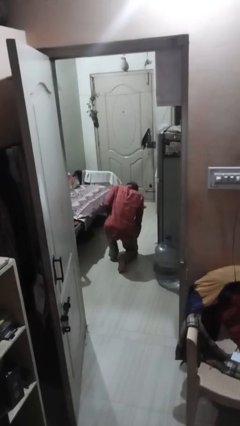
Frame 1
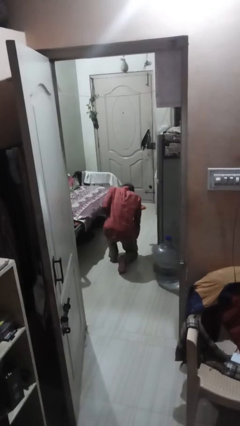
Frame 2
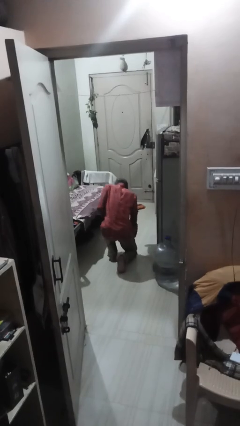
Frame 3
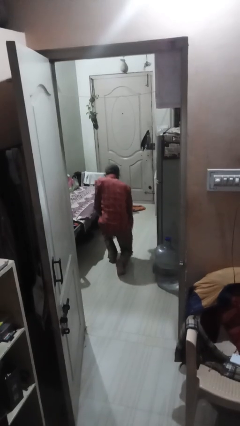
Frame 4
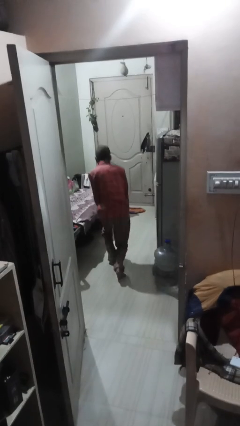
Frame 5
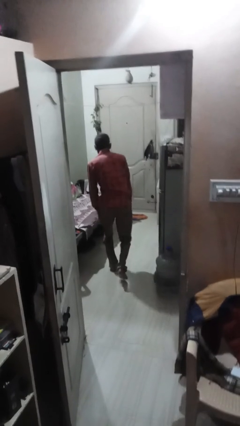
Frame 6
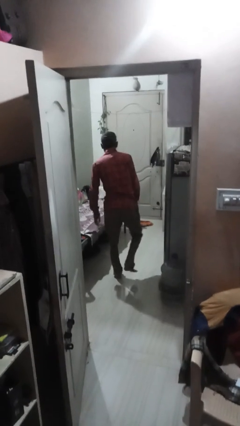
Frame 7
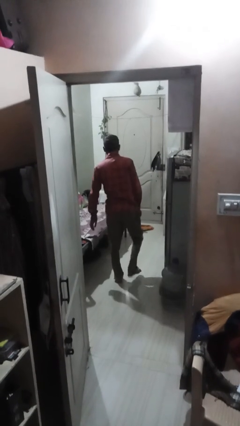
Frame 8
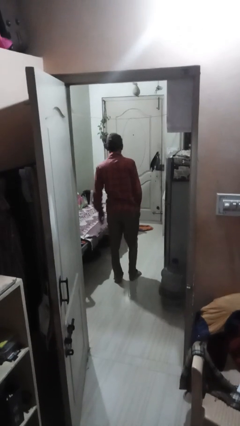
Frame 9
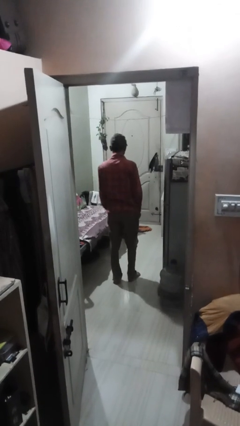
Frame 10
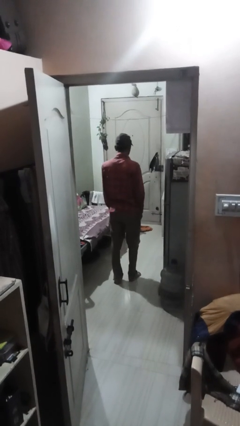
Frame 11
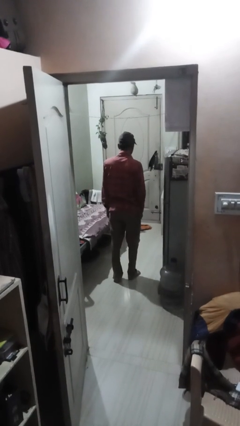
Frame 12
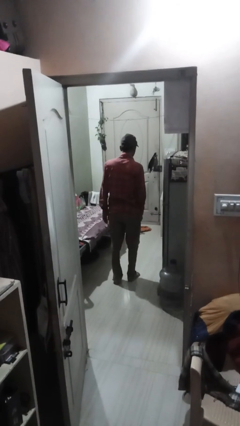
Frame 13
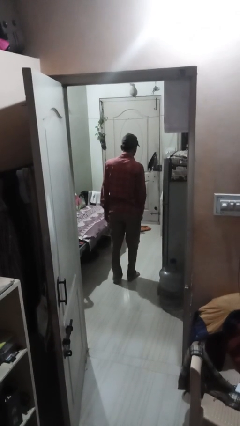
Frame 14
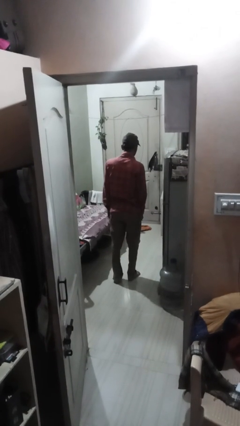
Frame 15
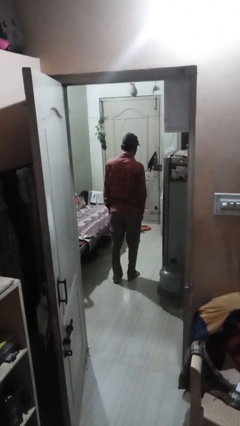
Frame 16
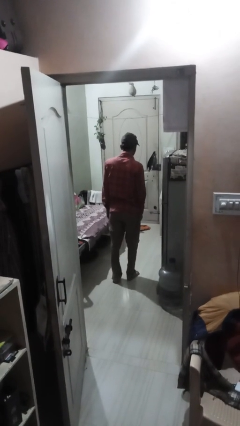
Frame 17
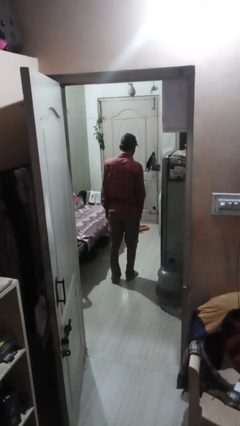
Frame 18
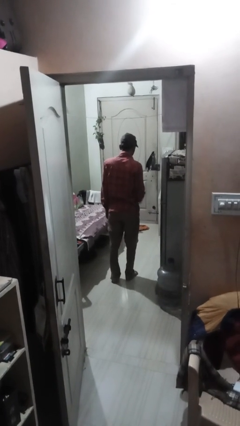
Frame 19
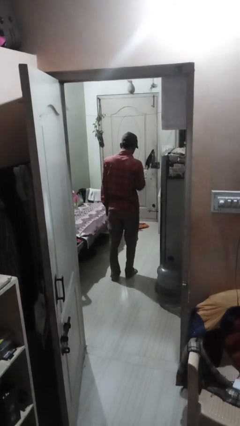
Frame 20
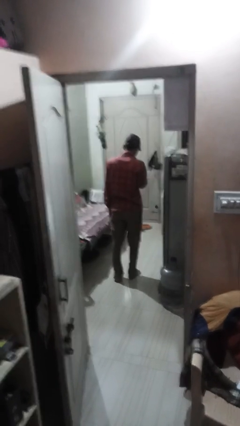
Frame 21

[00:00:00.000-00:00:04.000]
person stands up from floor

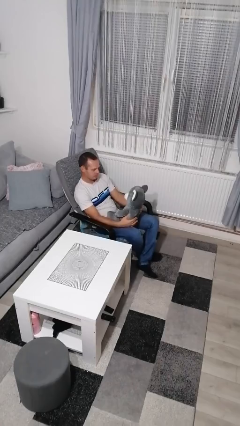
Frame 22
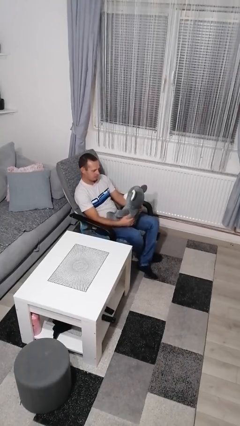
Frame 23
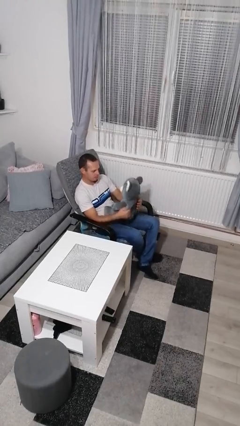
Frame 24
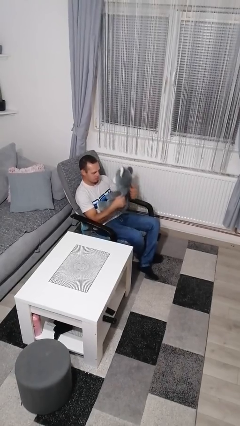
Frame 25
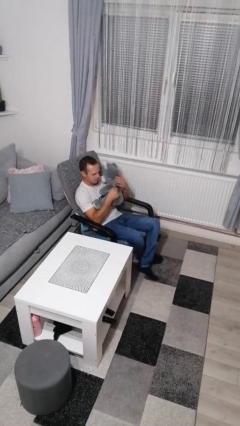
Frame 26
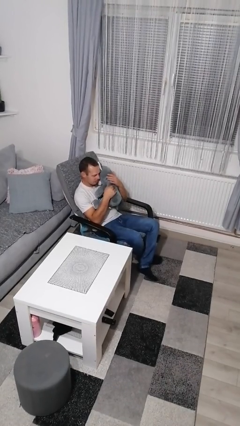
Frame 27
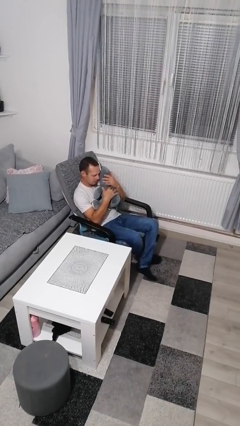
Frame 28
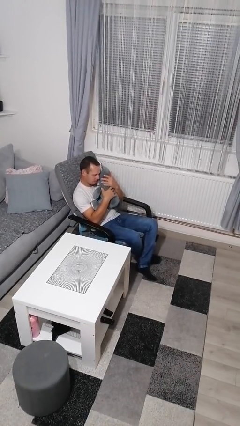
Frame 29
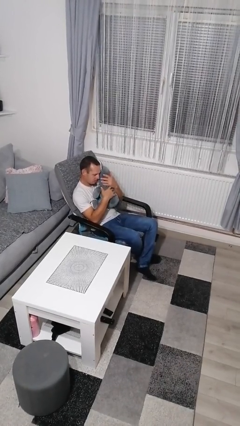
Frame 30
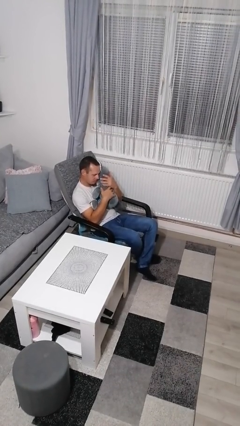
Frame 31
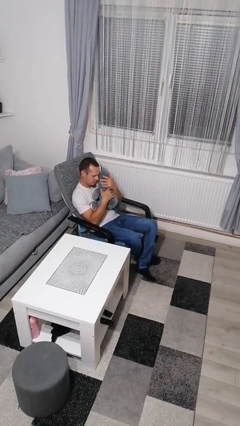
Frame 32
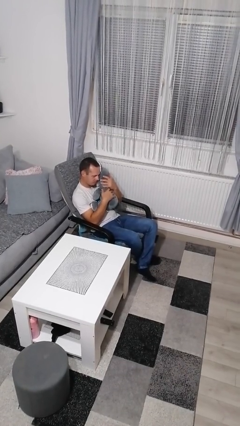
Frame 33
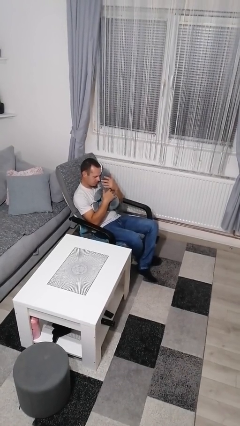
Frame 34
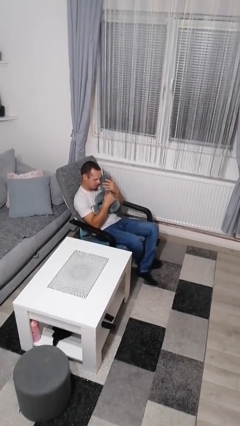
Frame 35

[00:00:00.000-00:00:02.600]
person hugs stuffed animal

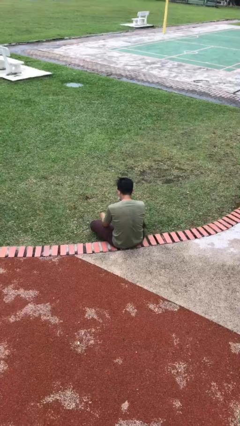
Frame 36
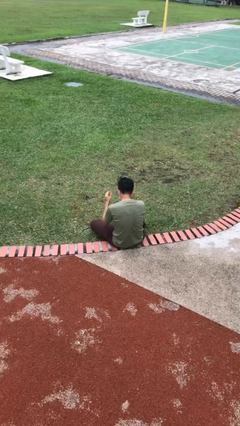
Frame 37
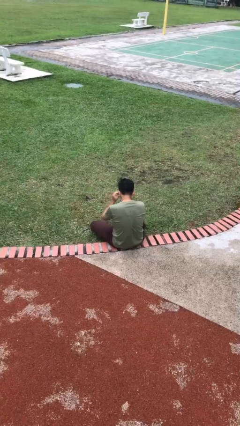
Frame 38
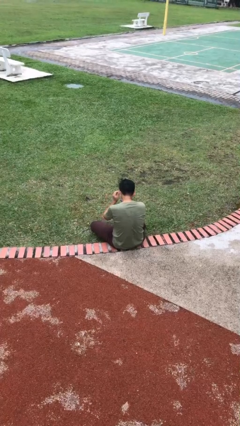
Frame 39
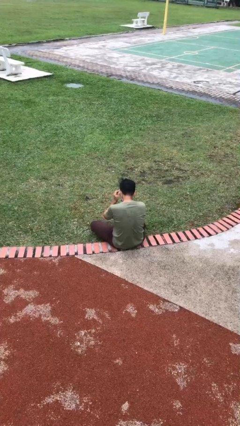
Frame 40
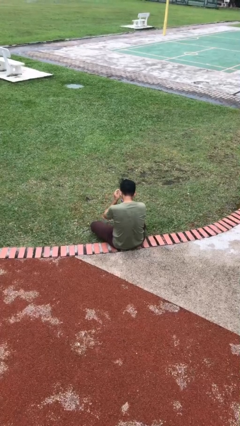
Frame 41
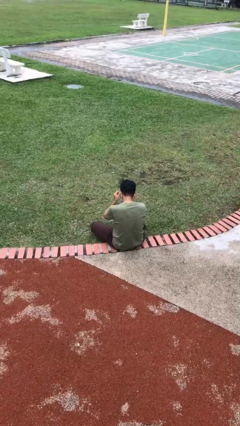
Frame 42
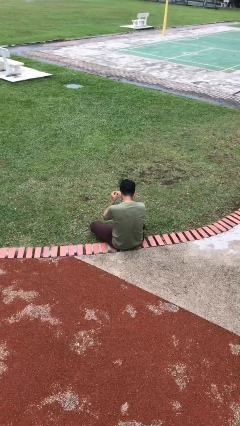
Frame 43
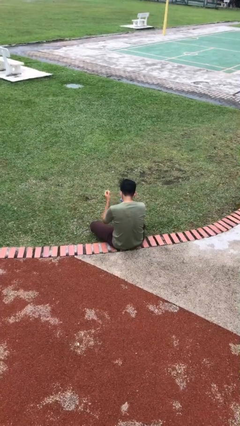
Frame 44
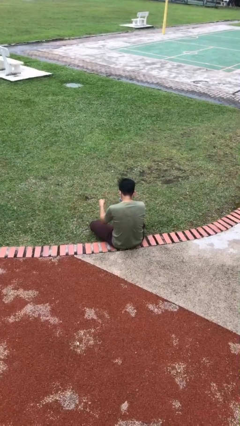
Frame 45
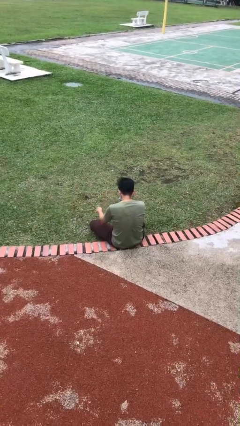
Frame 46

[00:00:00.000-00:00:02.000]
person touches earlobe

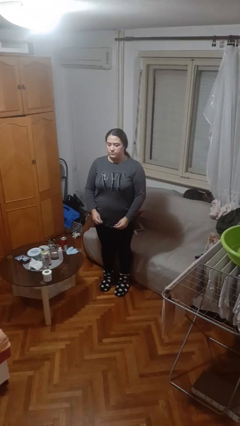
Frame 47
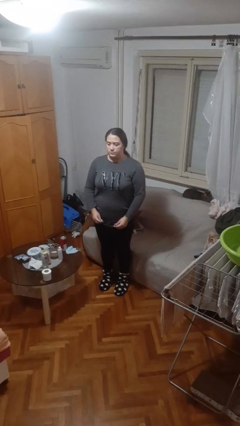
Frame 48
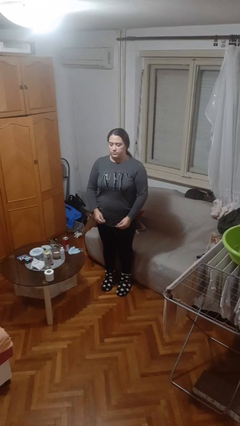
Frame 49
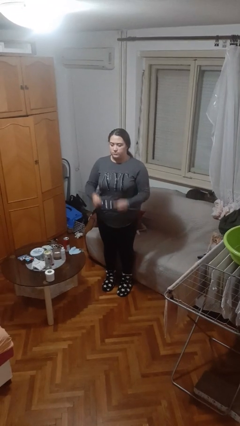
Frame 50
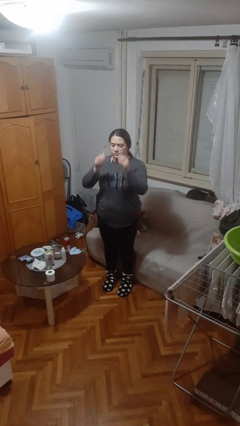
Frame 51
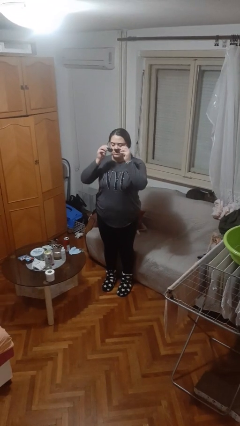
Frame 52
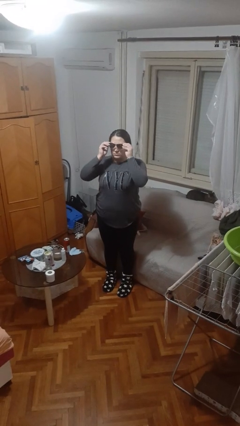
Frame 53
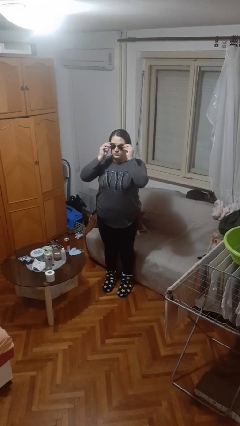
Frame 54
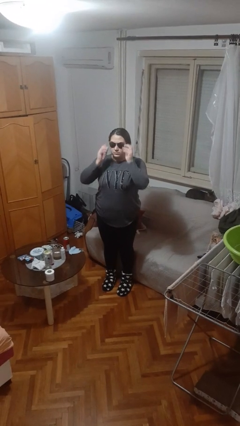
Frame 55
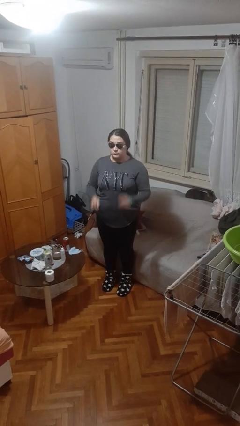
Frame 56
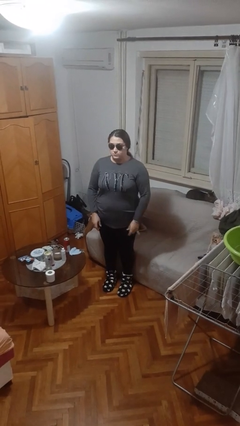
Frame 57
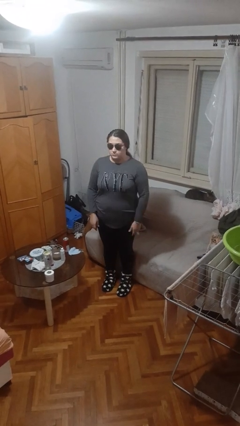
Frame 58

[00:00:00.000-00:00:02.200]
person puts on sunglasses

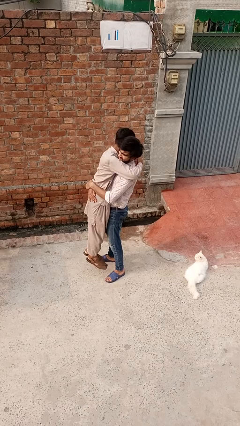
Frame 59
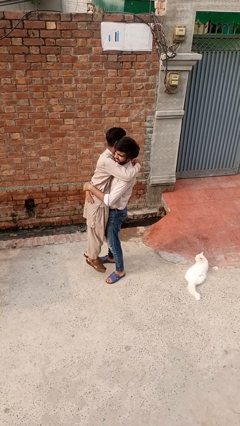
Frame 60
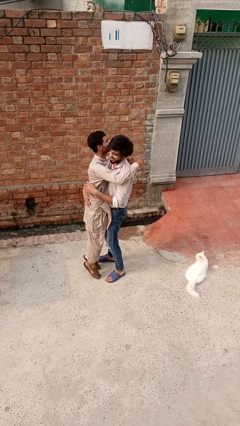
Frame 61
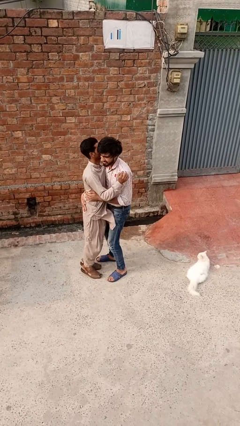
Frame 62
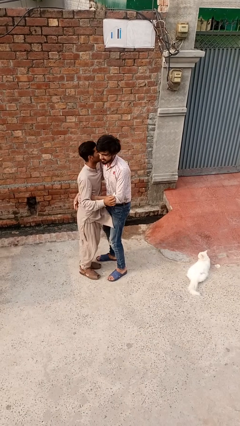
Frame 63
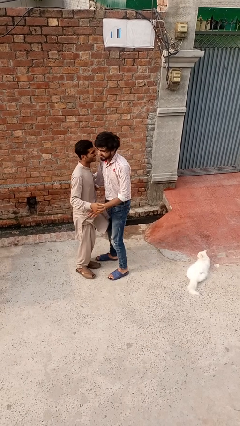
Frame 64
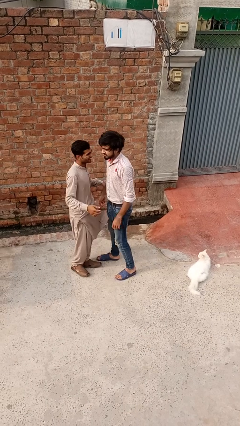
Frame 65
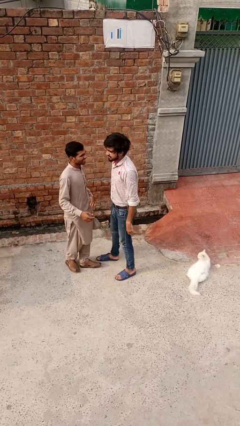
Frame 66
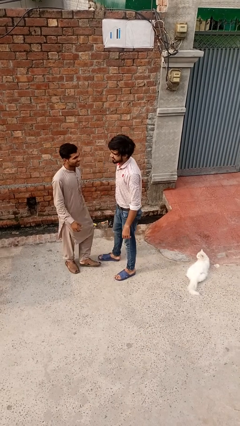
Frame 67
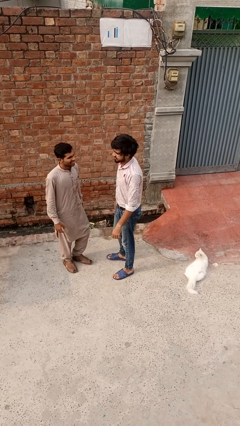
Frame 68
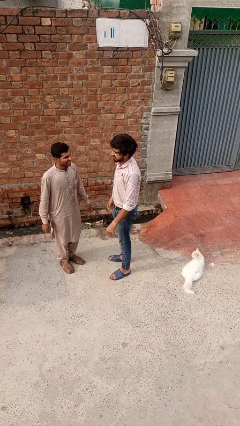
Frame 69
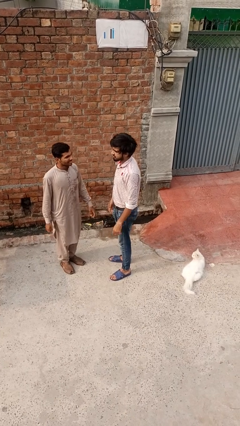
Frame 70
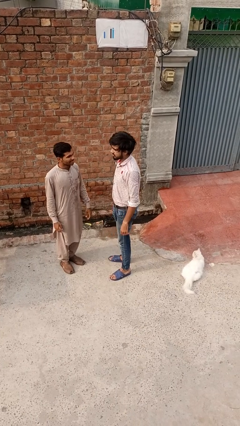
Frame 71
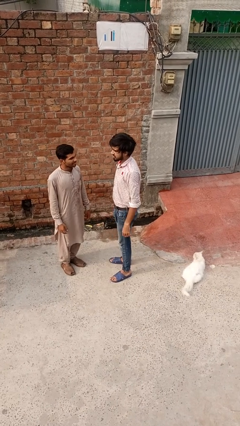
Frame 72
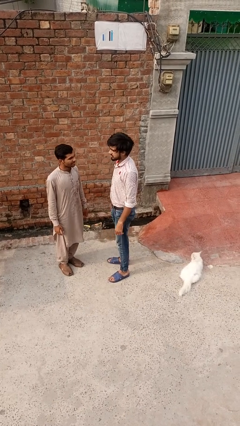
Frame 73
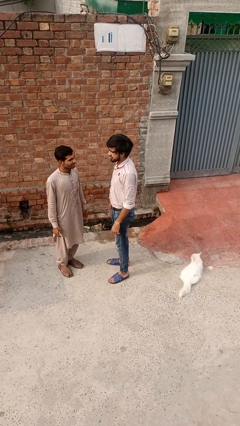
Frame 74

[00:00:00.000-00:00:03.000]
person puts down person

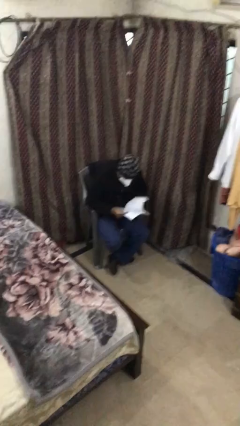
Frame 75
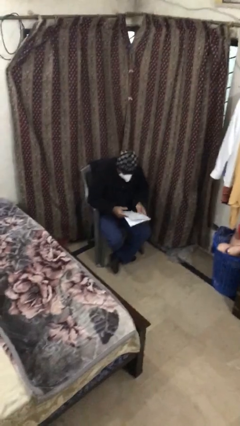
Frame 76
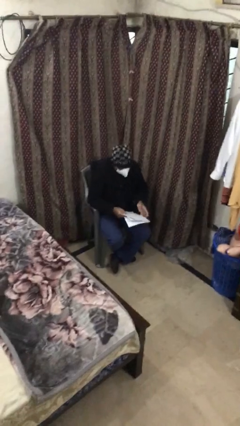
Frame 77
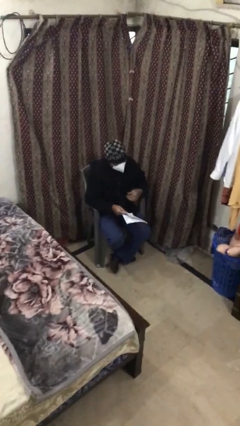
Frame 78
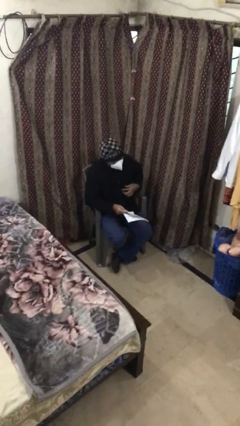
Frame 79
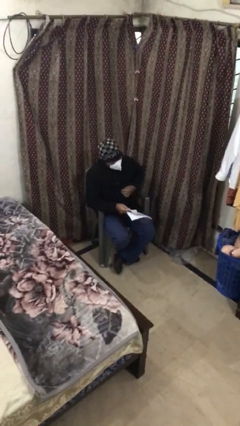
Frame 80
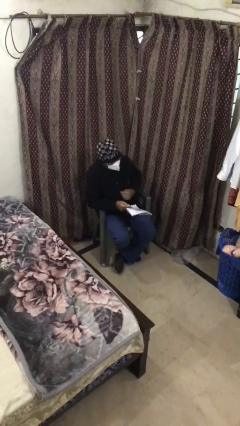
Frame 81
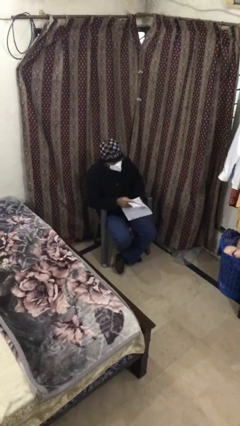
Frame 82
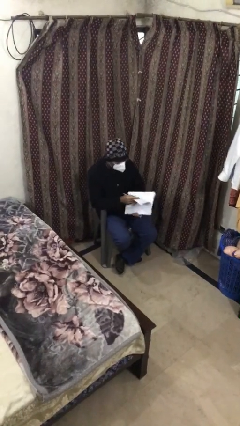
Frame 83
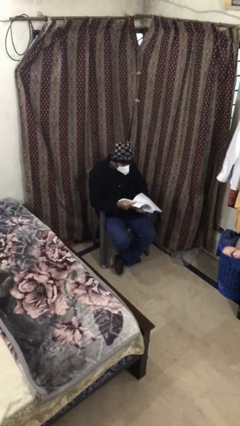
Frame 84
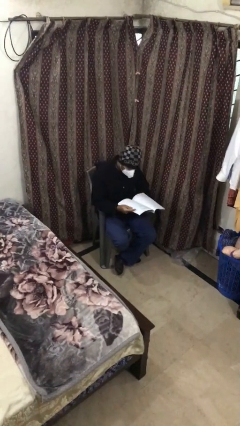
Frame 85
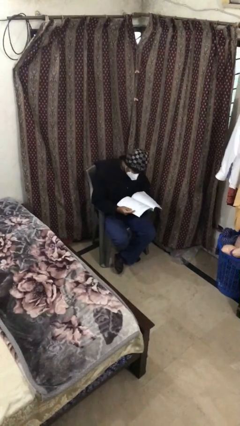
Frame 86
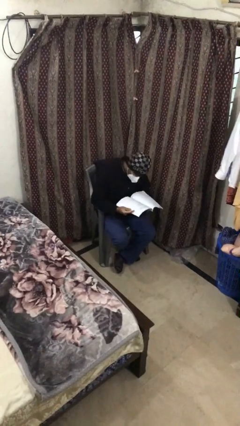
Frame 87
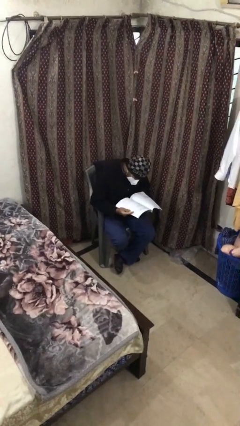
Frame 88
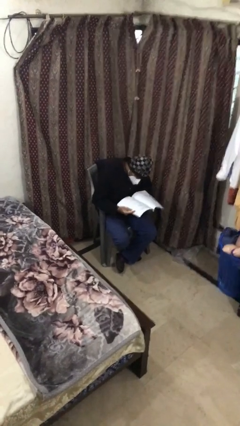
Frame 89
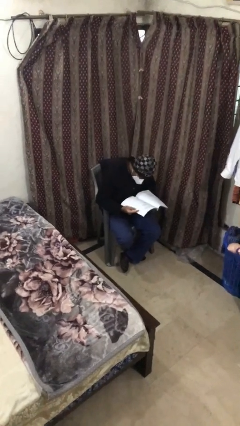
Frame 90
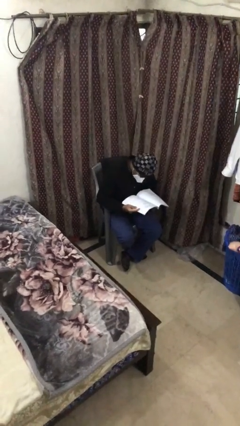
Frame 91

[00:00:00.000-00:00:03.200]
person reads document

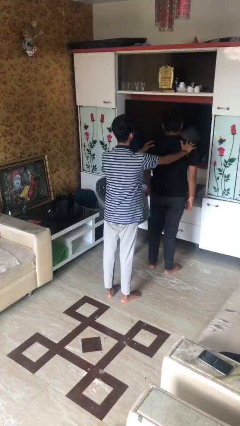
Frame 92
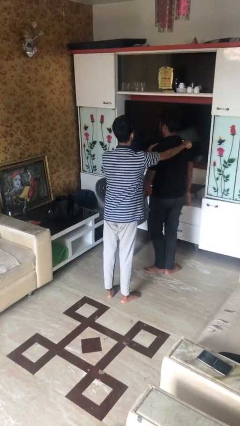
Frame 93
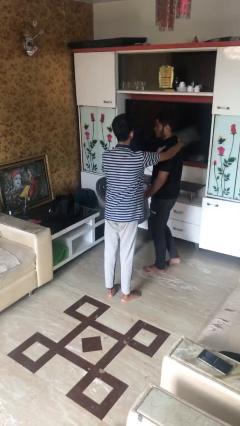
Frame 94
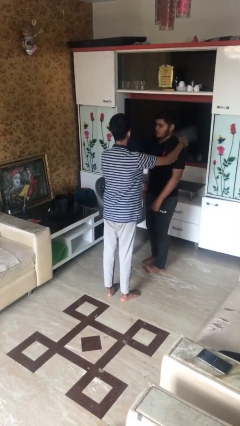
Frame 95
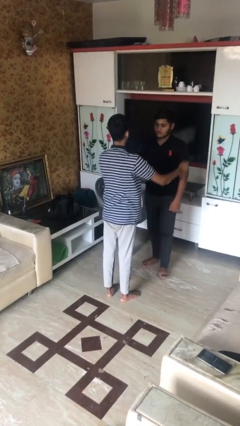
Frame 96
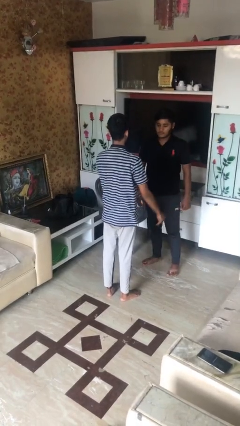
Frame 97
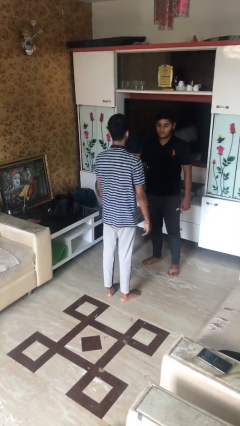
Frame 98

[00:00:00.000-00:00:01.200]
person spins person around
